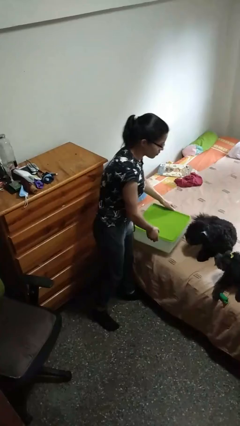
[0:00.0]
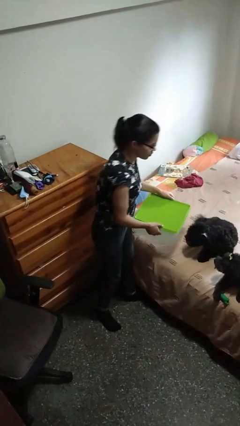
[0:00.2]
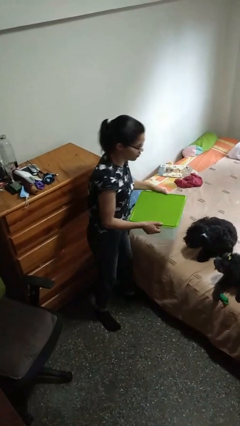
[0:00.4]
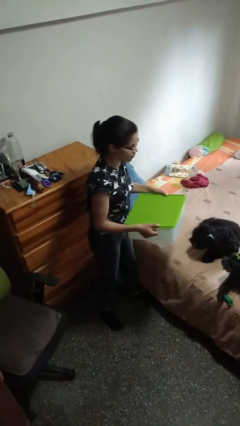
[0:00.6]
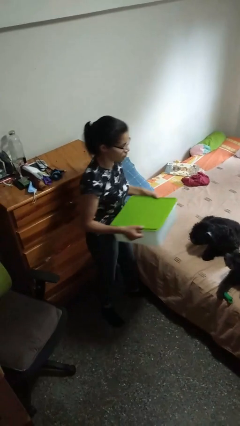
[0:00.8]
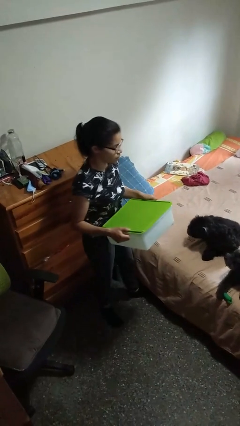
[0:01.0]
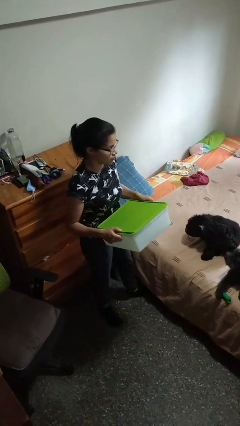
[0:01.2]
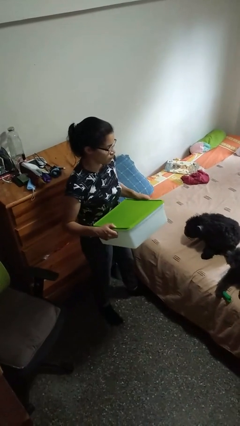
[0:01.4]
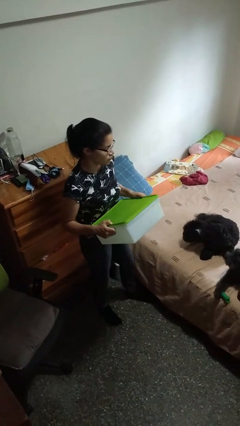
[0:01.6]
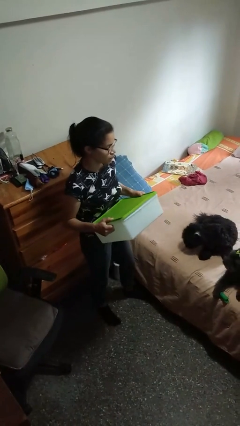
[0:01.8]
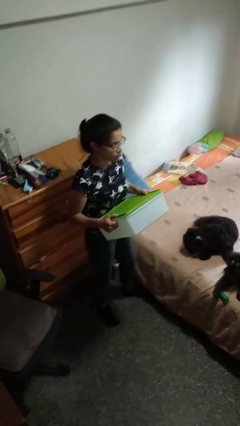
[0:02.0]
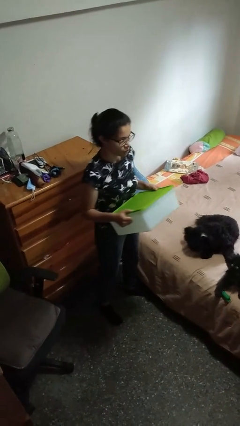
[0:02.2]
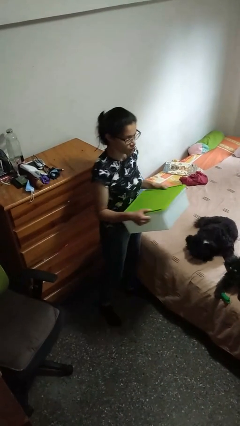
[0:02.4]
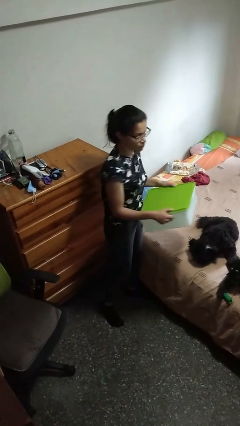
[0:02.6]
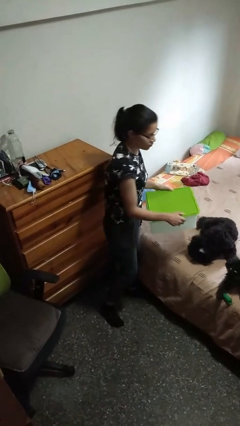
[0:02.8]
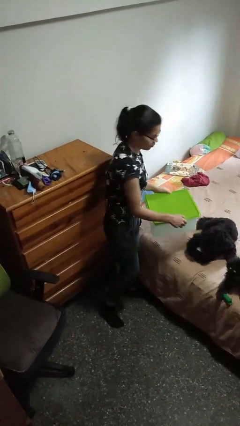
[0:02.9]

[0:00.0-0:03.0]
person picks up object from bed

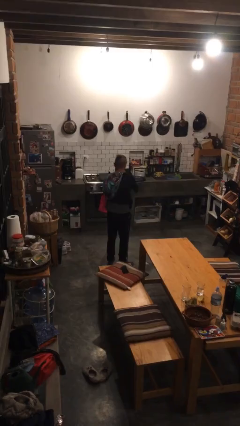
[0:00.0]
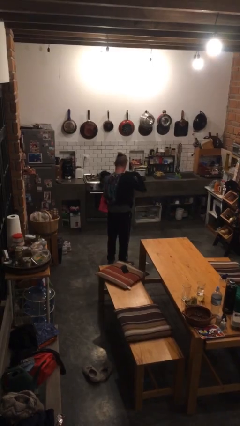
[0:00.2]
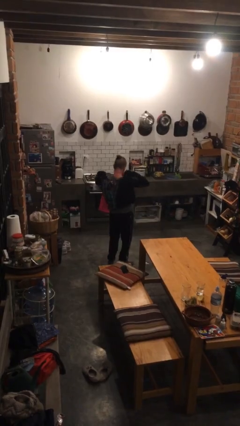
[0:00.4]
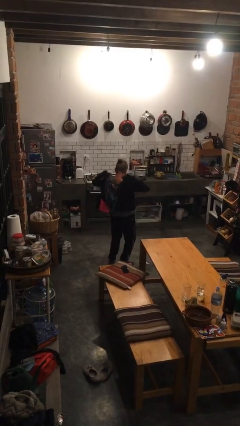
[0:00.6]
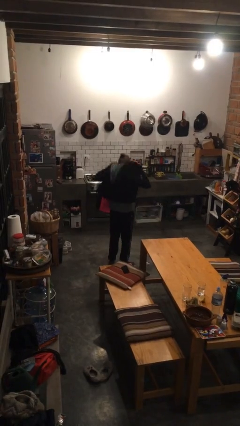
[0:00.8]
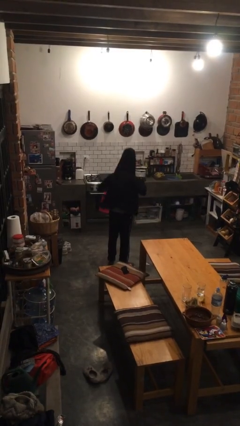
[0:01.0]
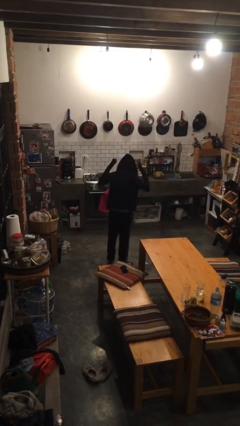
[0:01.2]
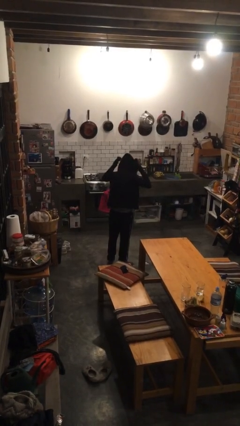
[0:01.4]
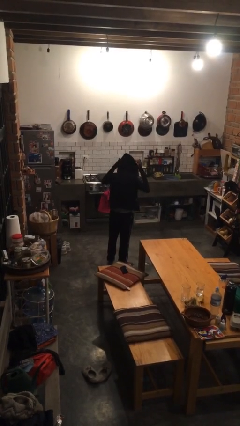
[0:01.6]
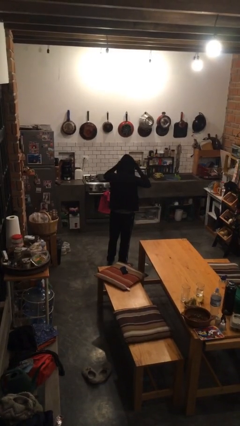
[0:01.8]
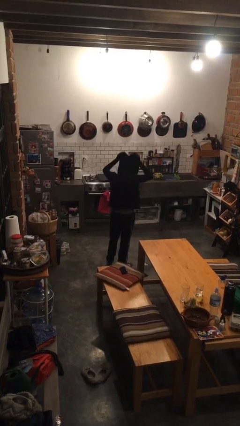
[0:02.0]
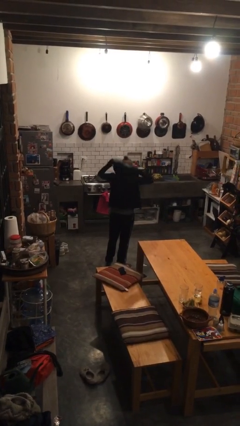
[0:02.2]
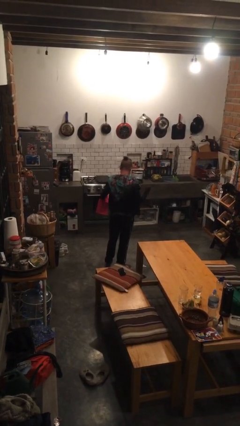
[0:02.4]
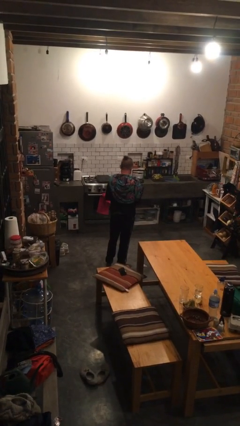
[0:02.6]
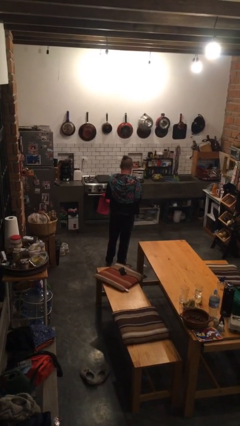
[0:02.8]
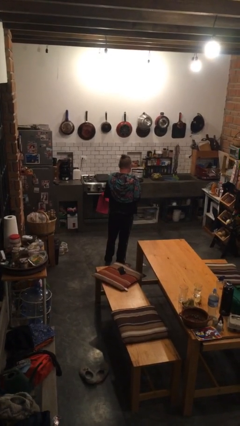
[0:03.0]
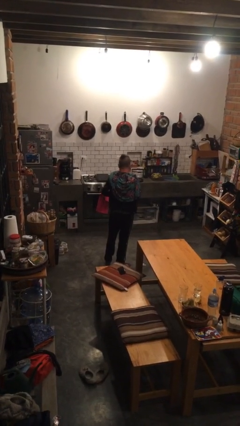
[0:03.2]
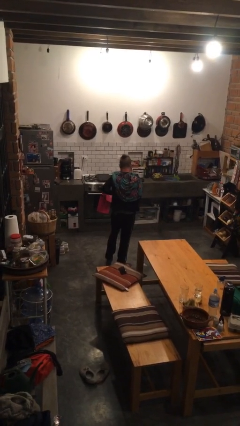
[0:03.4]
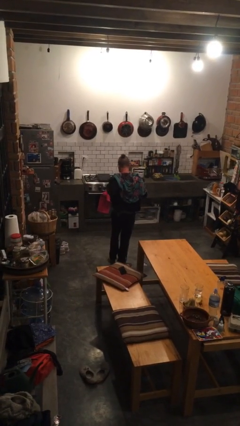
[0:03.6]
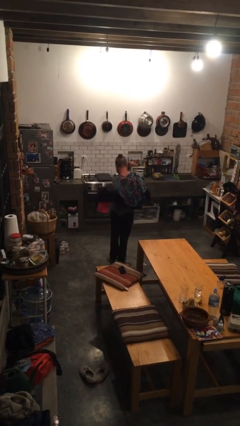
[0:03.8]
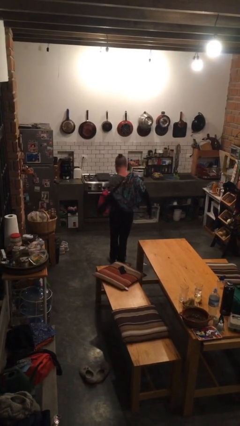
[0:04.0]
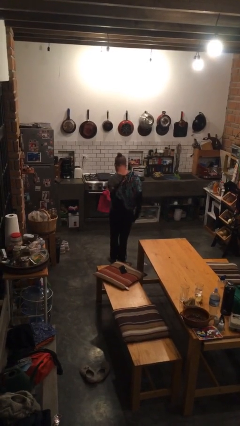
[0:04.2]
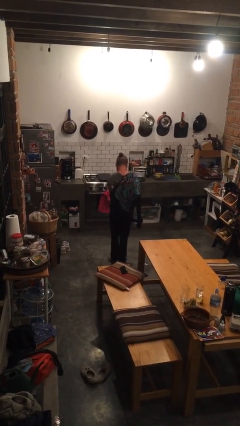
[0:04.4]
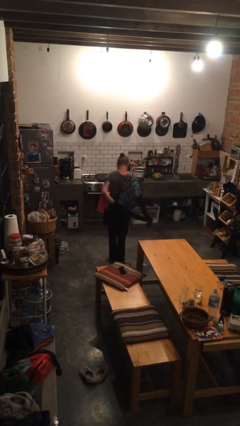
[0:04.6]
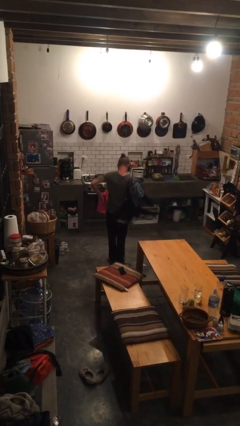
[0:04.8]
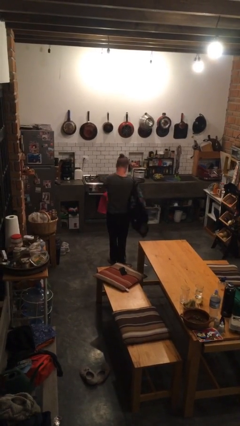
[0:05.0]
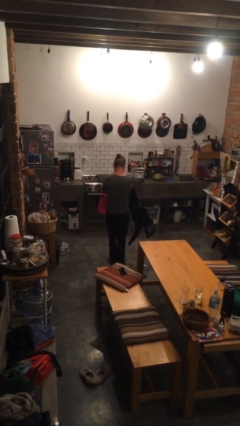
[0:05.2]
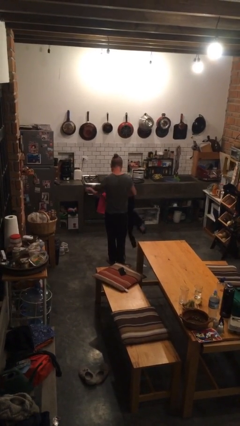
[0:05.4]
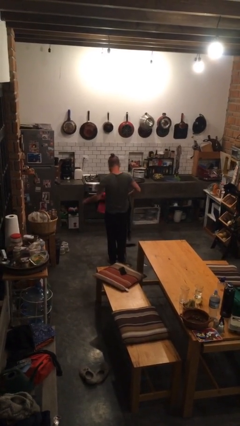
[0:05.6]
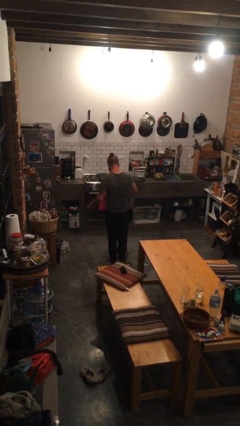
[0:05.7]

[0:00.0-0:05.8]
person takes off hoodie

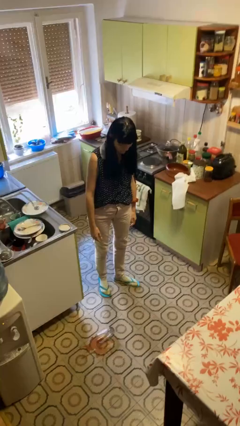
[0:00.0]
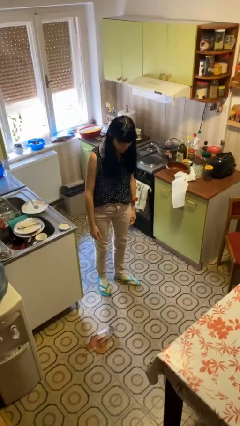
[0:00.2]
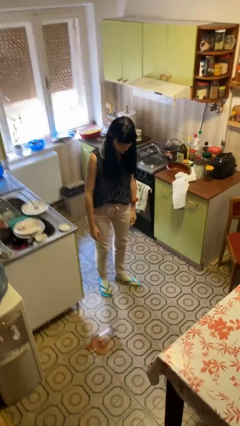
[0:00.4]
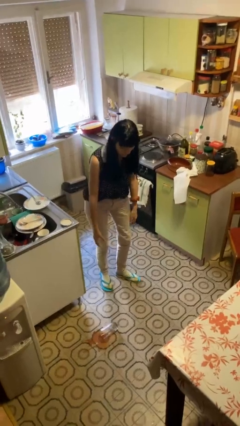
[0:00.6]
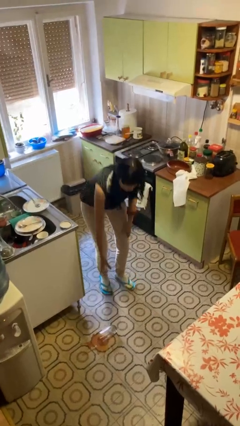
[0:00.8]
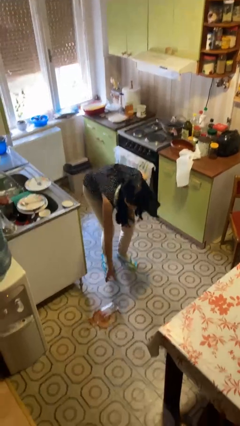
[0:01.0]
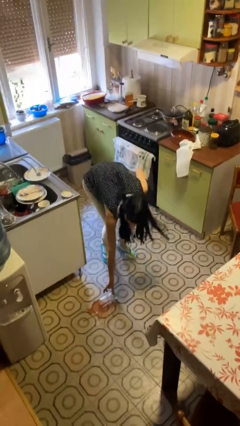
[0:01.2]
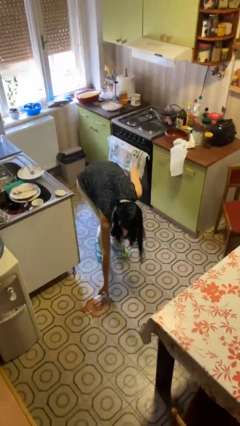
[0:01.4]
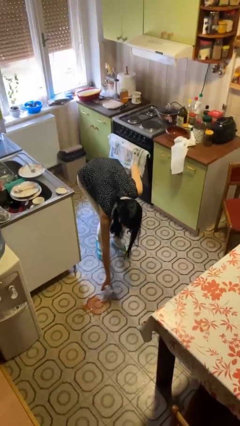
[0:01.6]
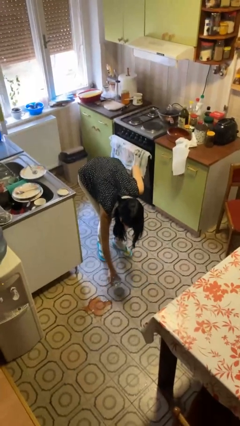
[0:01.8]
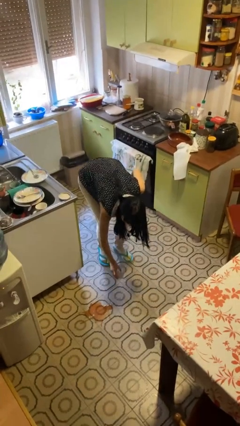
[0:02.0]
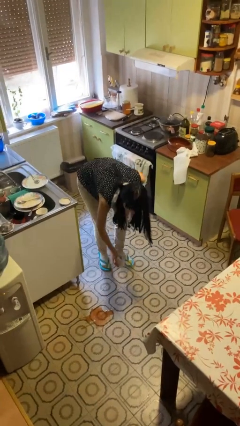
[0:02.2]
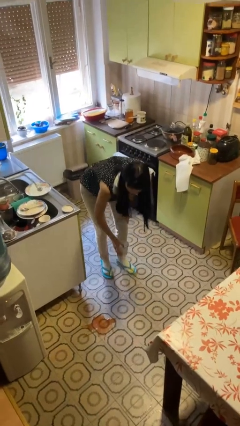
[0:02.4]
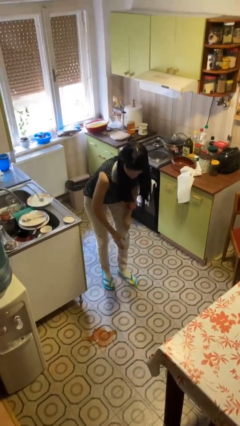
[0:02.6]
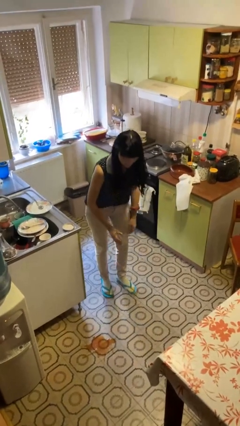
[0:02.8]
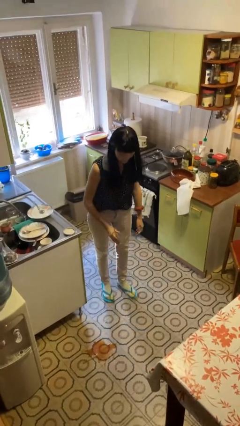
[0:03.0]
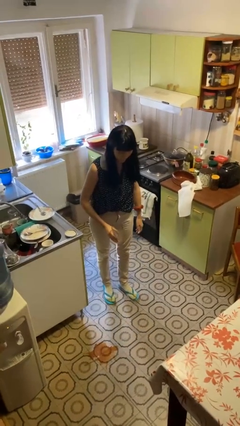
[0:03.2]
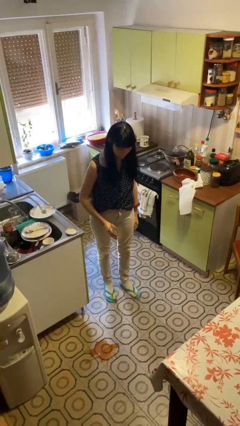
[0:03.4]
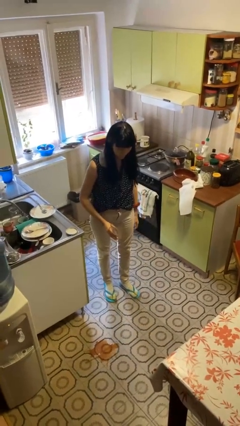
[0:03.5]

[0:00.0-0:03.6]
person sets upright glass

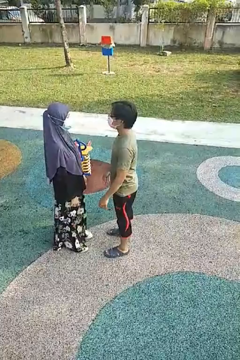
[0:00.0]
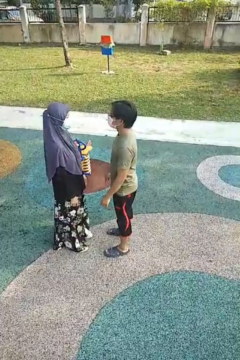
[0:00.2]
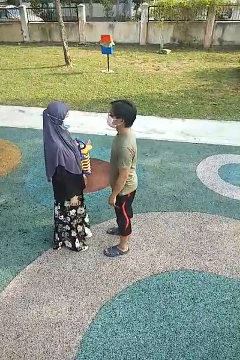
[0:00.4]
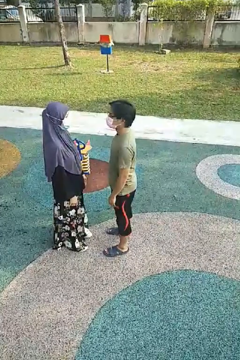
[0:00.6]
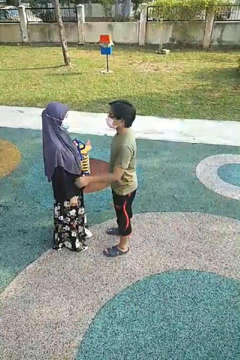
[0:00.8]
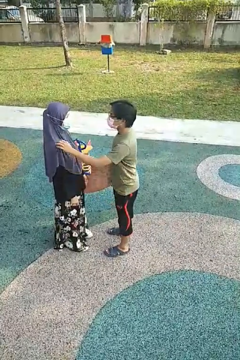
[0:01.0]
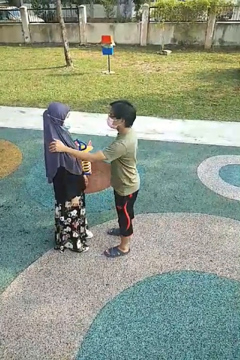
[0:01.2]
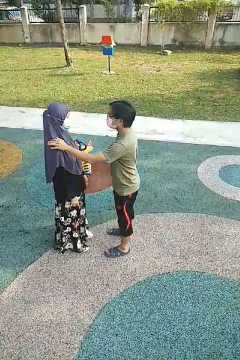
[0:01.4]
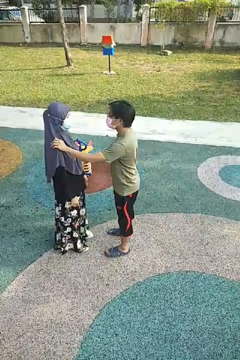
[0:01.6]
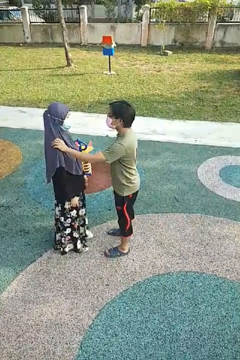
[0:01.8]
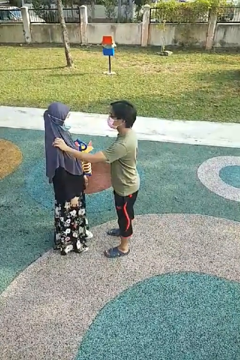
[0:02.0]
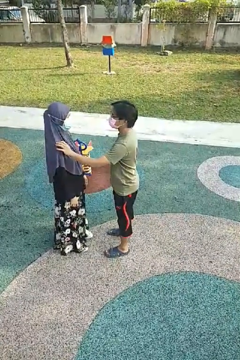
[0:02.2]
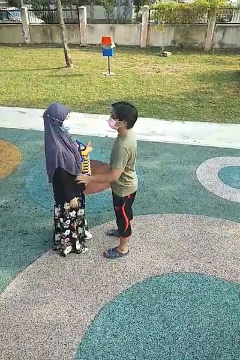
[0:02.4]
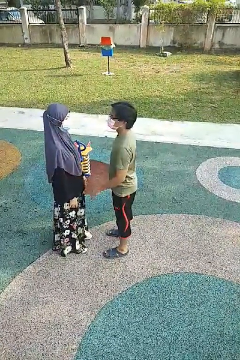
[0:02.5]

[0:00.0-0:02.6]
person pounds shoulders of person

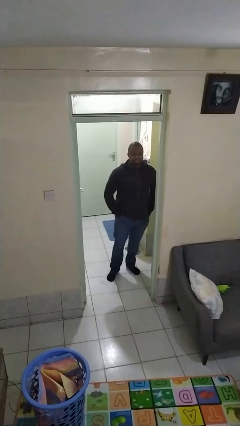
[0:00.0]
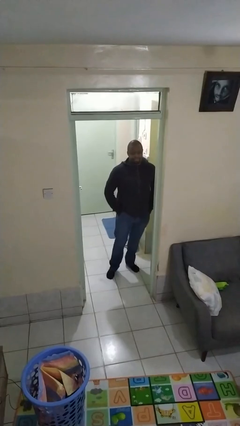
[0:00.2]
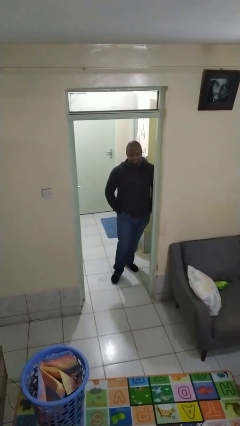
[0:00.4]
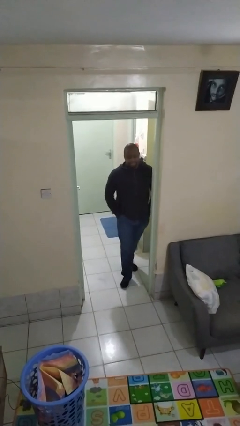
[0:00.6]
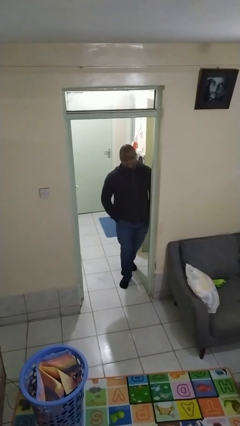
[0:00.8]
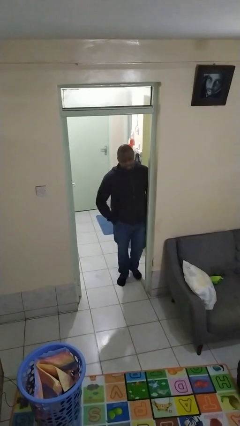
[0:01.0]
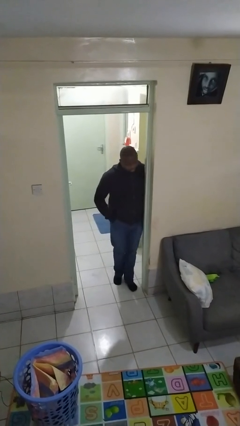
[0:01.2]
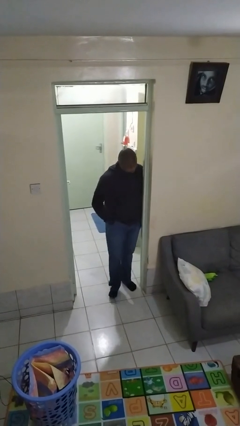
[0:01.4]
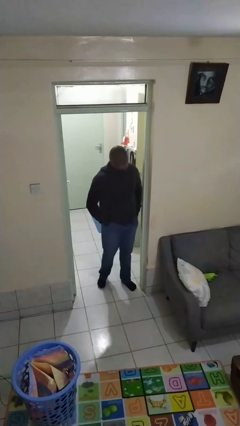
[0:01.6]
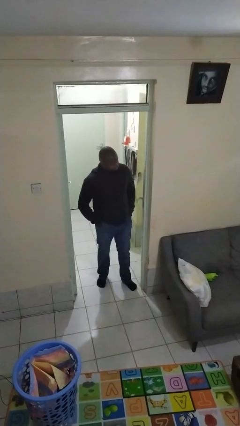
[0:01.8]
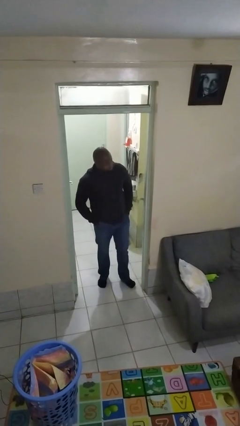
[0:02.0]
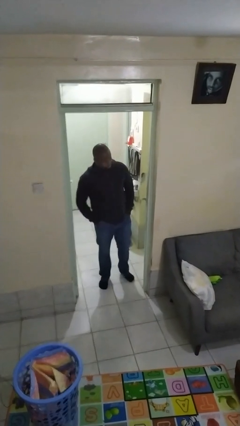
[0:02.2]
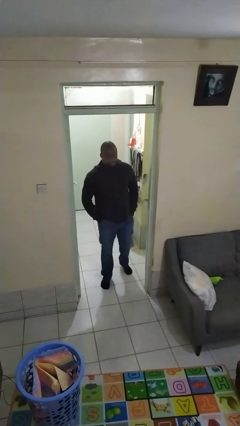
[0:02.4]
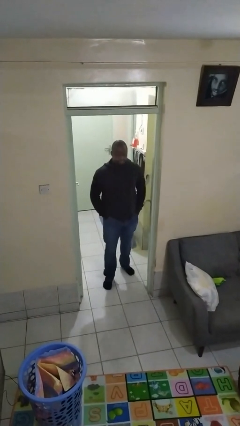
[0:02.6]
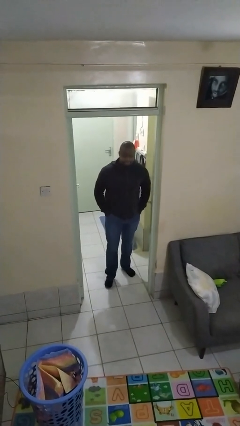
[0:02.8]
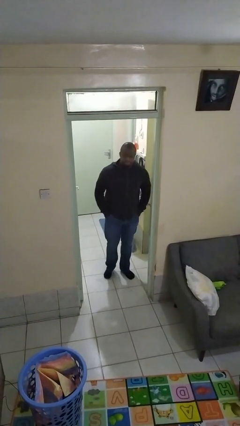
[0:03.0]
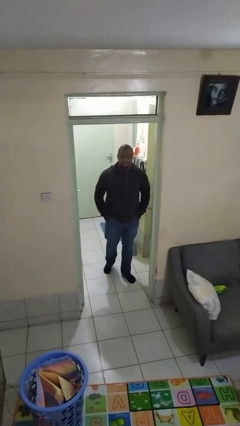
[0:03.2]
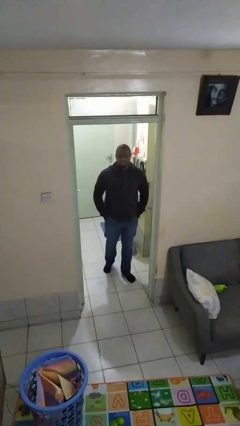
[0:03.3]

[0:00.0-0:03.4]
person bumps into wall
